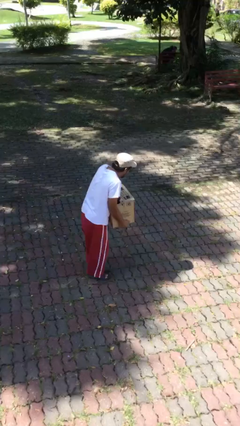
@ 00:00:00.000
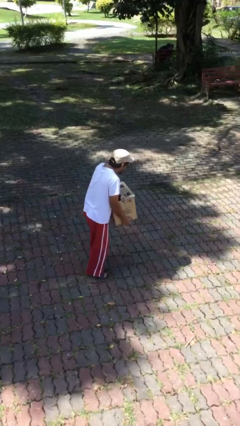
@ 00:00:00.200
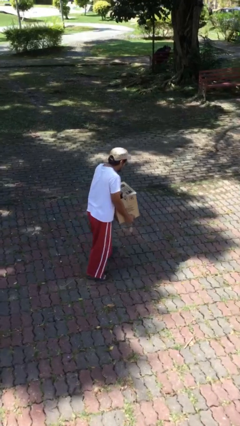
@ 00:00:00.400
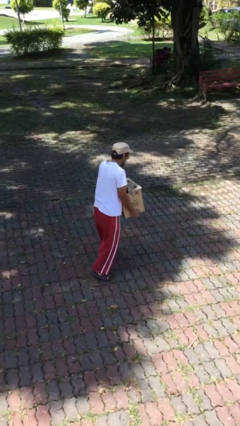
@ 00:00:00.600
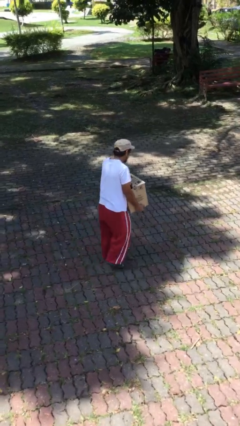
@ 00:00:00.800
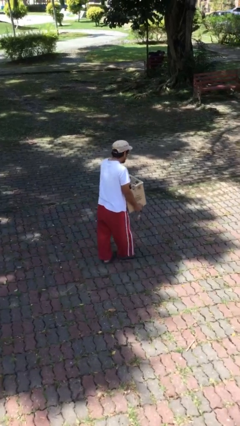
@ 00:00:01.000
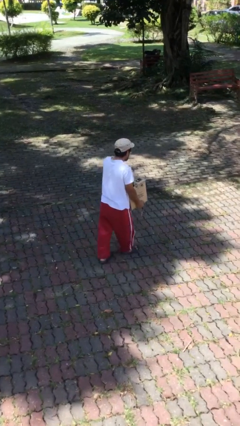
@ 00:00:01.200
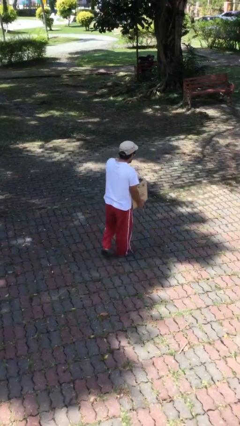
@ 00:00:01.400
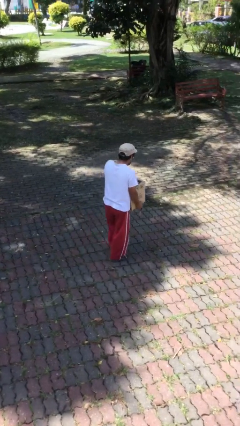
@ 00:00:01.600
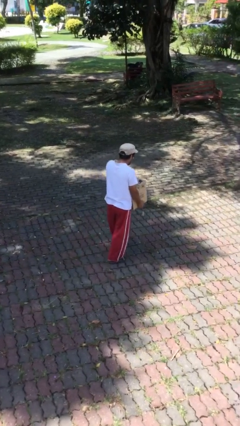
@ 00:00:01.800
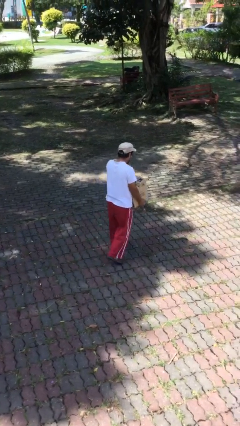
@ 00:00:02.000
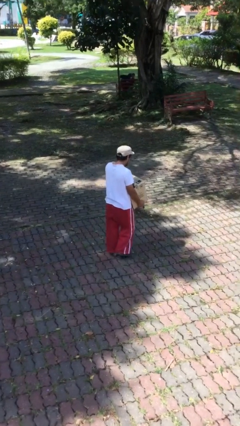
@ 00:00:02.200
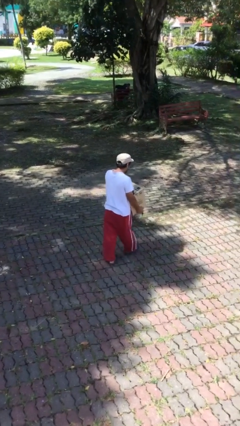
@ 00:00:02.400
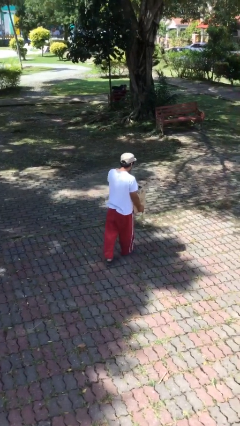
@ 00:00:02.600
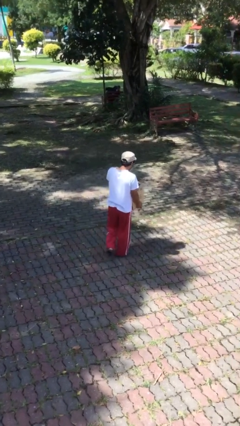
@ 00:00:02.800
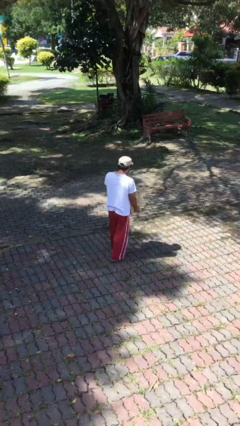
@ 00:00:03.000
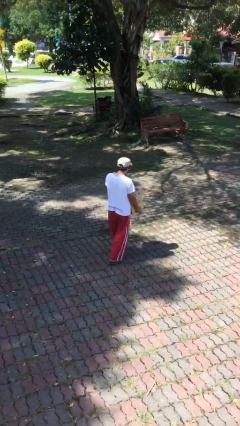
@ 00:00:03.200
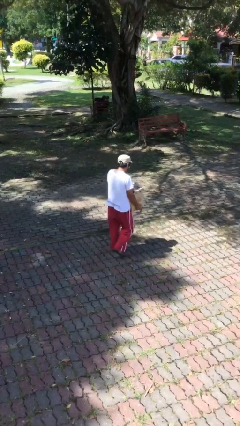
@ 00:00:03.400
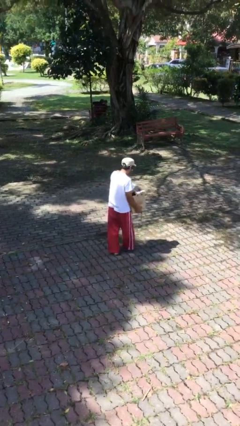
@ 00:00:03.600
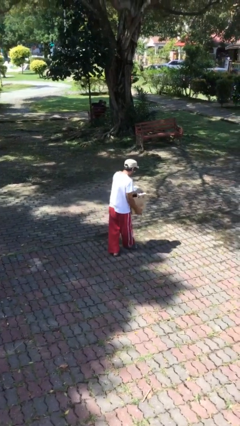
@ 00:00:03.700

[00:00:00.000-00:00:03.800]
person carries heavy object

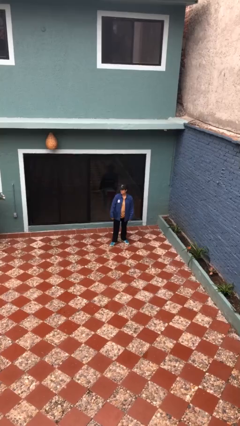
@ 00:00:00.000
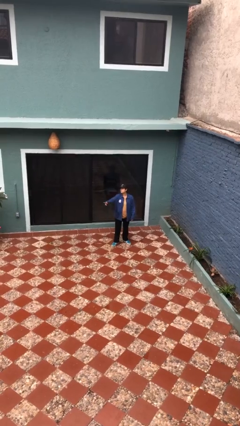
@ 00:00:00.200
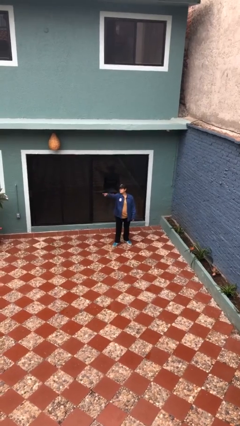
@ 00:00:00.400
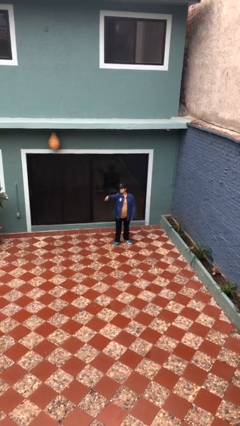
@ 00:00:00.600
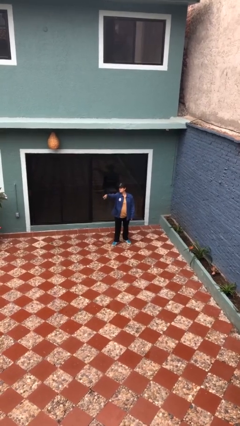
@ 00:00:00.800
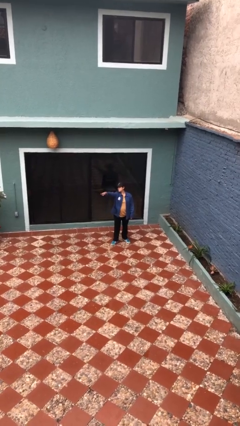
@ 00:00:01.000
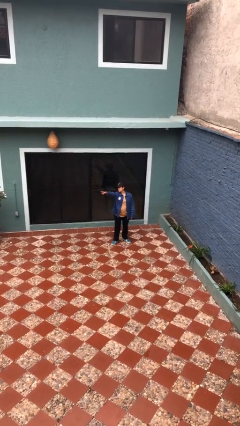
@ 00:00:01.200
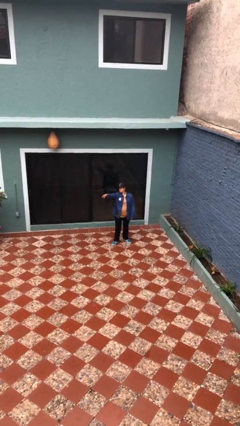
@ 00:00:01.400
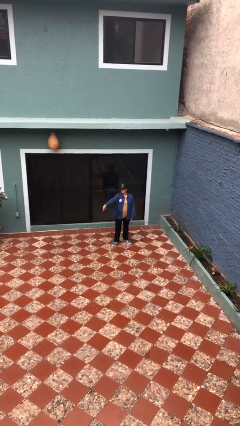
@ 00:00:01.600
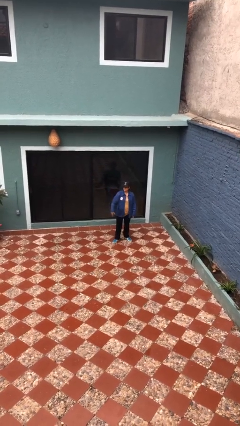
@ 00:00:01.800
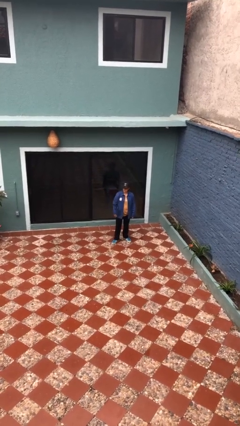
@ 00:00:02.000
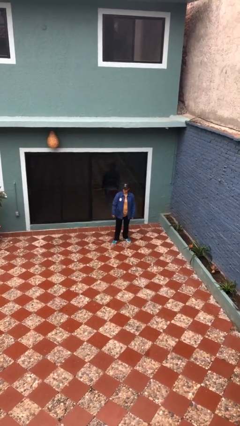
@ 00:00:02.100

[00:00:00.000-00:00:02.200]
person points at person

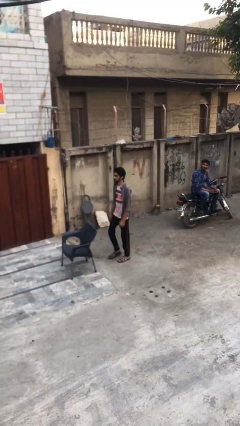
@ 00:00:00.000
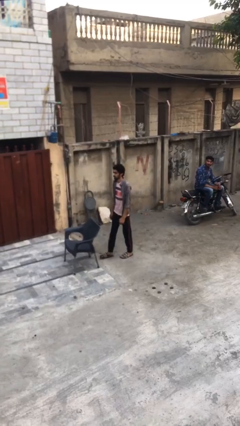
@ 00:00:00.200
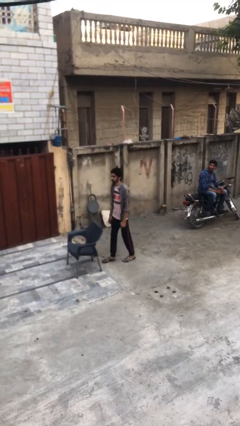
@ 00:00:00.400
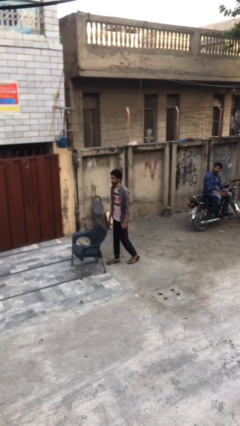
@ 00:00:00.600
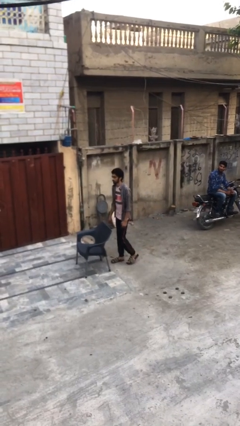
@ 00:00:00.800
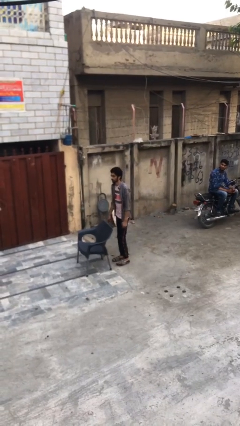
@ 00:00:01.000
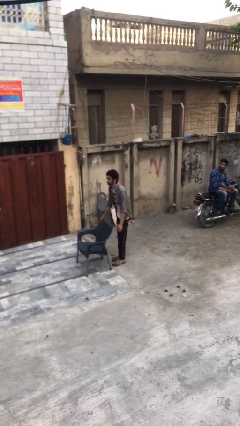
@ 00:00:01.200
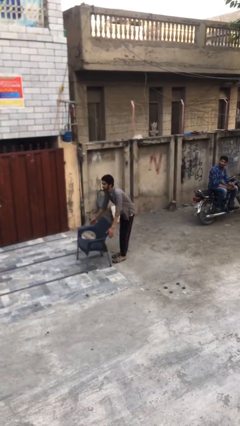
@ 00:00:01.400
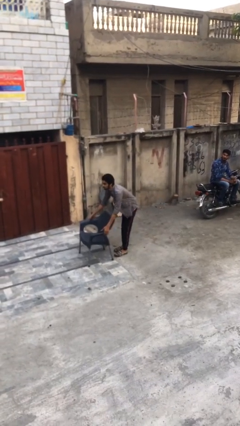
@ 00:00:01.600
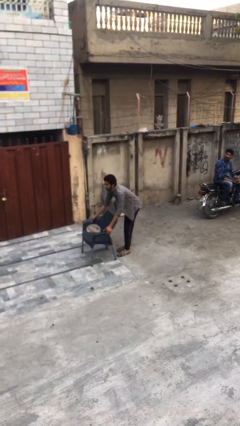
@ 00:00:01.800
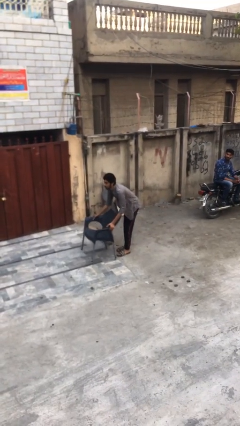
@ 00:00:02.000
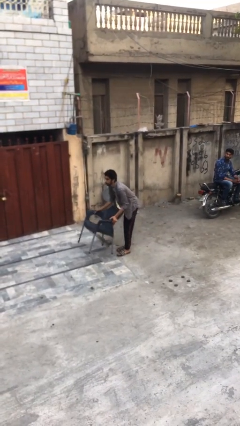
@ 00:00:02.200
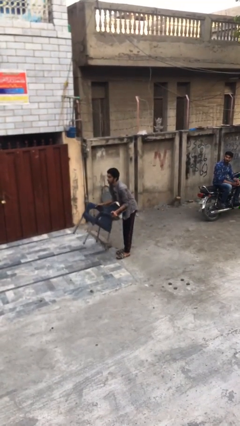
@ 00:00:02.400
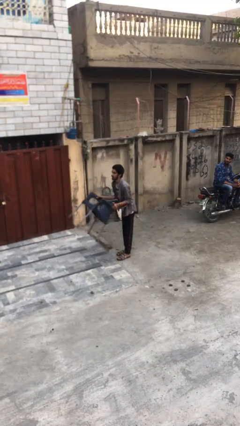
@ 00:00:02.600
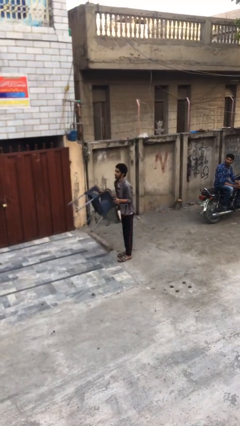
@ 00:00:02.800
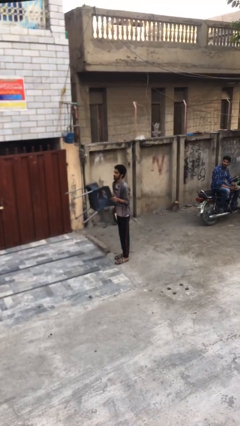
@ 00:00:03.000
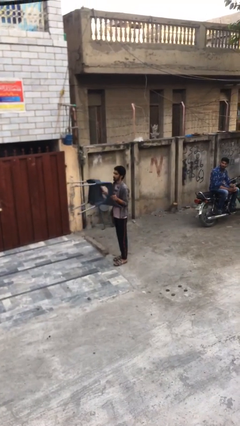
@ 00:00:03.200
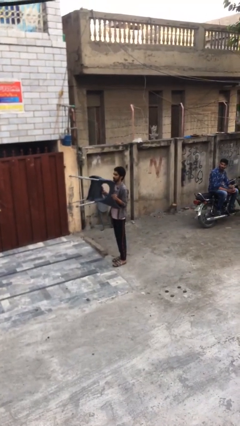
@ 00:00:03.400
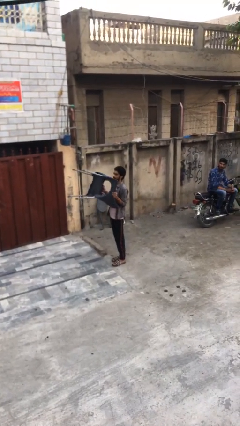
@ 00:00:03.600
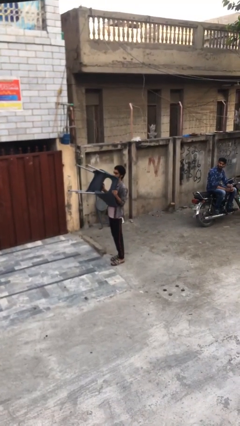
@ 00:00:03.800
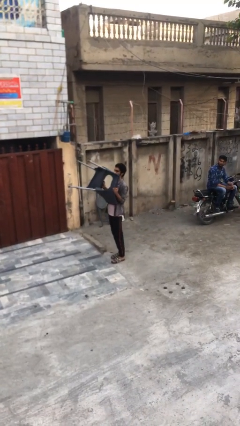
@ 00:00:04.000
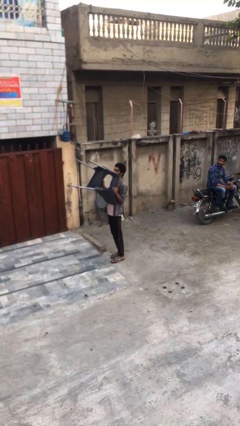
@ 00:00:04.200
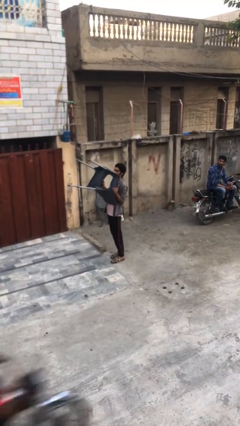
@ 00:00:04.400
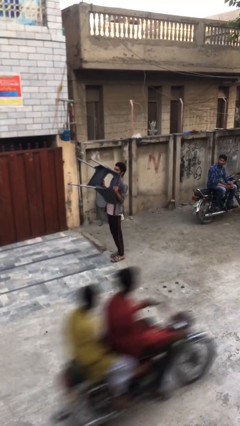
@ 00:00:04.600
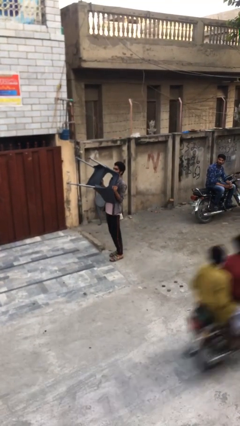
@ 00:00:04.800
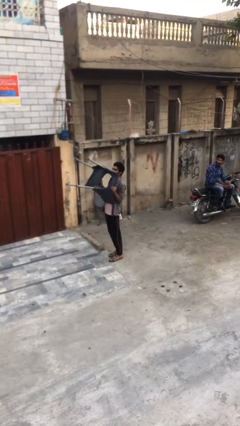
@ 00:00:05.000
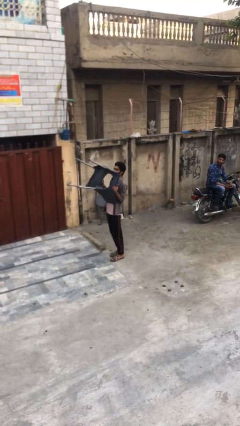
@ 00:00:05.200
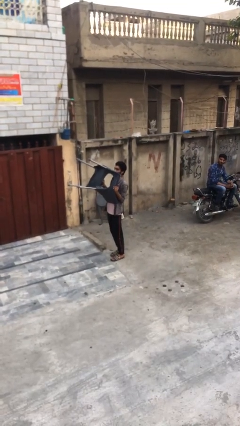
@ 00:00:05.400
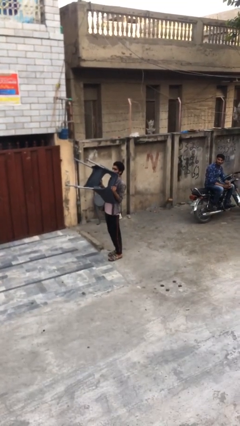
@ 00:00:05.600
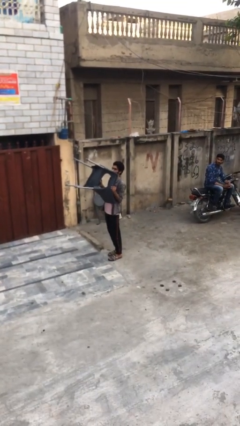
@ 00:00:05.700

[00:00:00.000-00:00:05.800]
person picks up object from floor

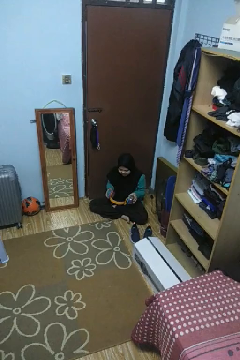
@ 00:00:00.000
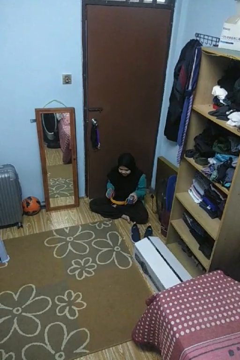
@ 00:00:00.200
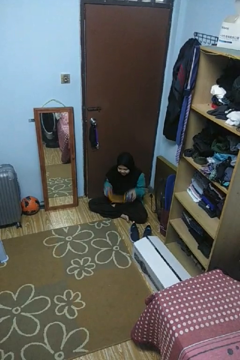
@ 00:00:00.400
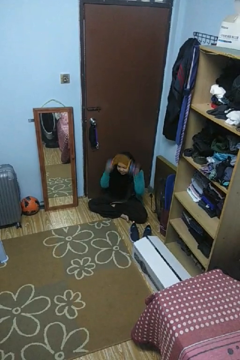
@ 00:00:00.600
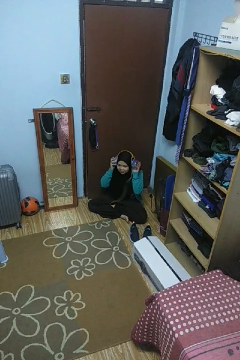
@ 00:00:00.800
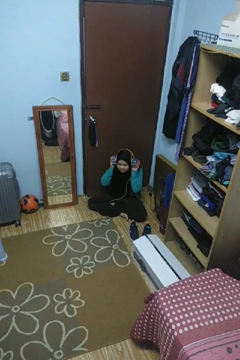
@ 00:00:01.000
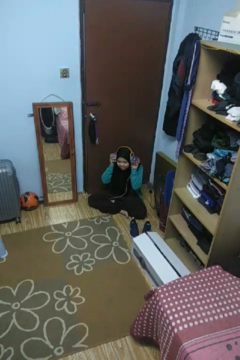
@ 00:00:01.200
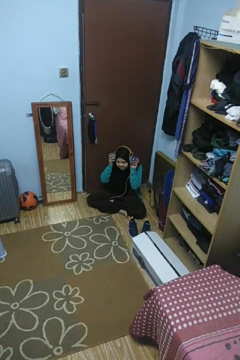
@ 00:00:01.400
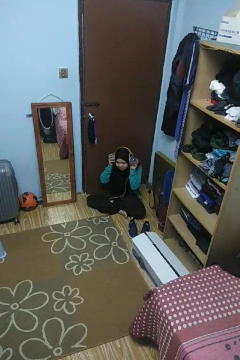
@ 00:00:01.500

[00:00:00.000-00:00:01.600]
person puts on headphones

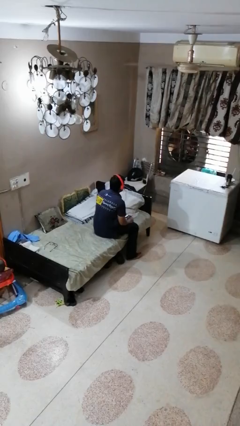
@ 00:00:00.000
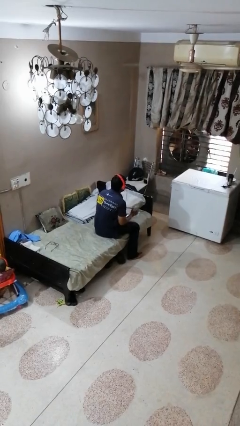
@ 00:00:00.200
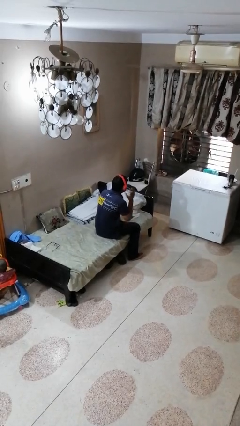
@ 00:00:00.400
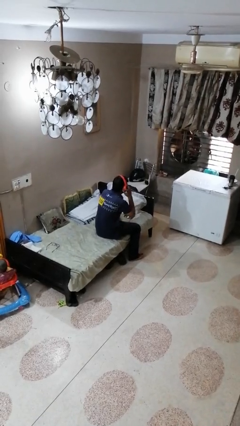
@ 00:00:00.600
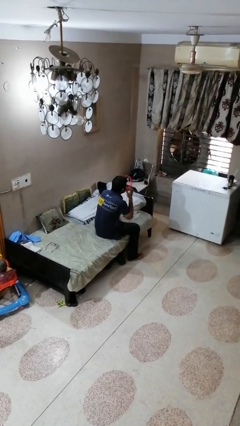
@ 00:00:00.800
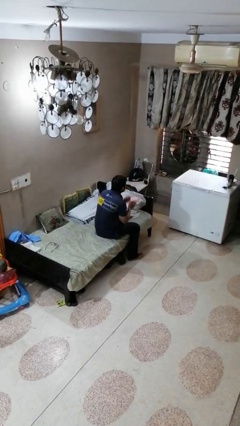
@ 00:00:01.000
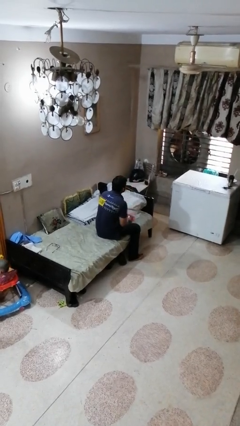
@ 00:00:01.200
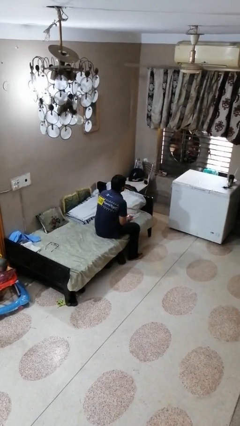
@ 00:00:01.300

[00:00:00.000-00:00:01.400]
person takes off headphones

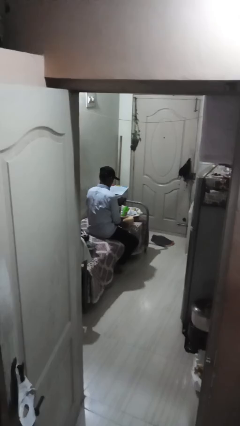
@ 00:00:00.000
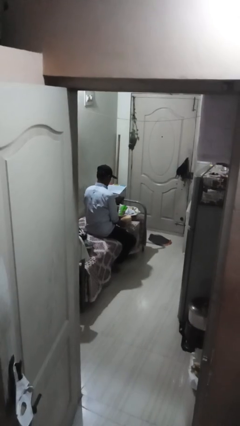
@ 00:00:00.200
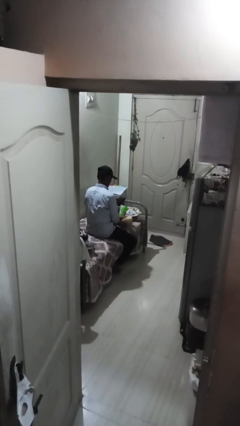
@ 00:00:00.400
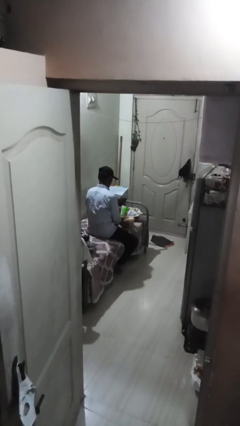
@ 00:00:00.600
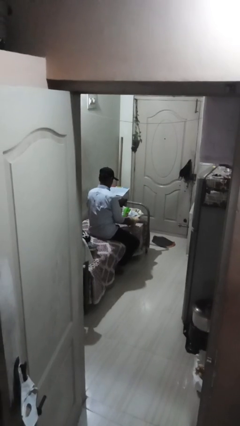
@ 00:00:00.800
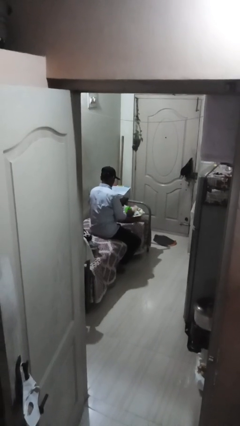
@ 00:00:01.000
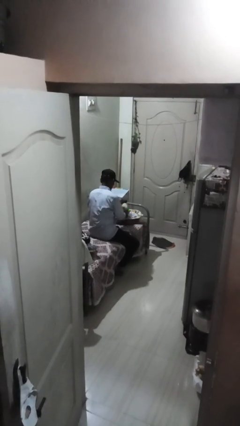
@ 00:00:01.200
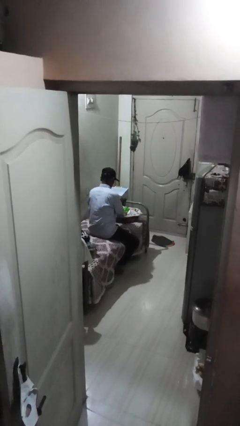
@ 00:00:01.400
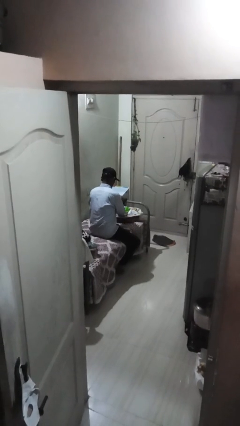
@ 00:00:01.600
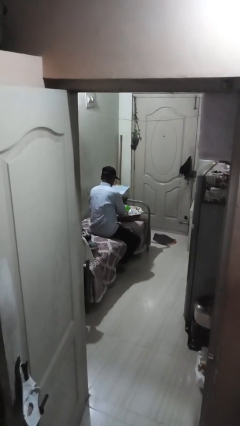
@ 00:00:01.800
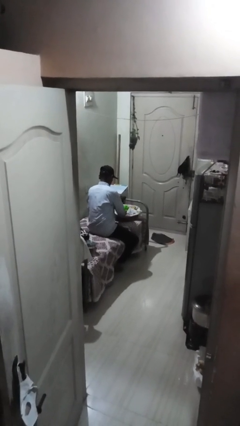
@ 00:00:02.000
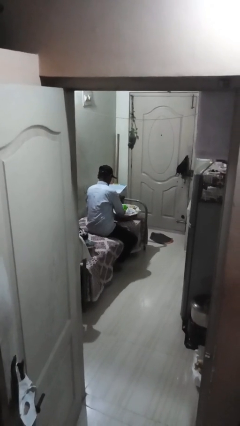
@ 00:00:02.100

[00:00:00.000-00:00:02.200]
person puts object into bag
